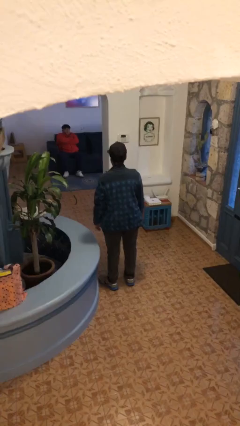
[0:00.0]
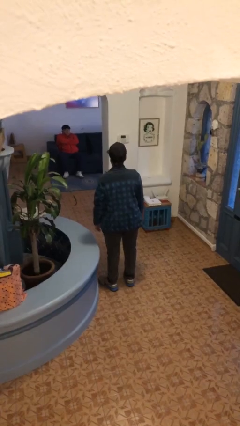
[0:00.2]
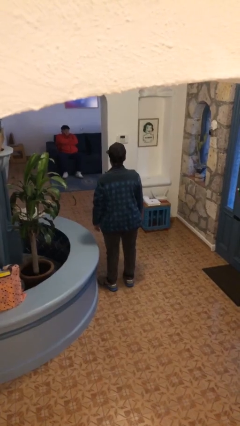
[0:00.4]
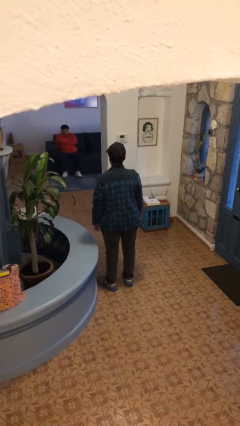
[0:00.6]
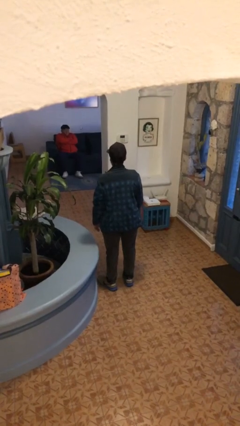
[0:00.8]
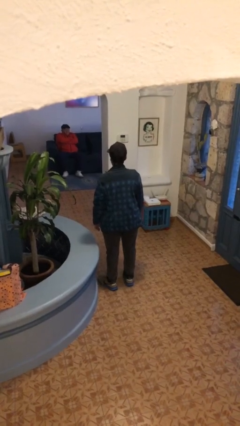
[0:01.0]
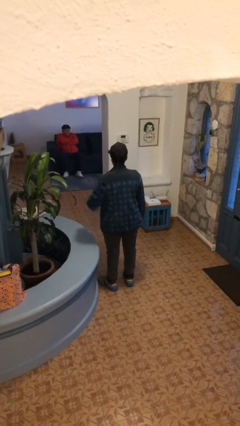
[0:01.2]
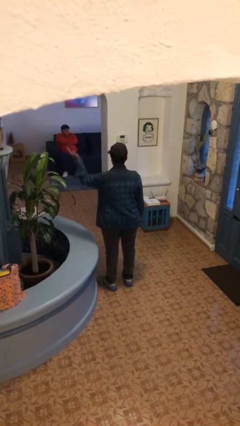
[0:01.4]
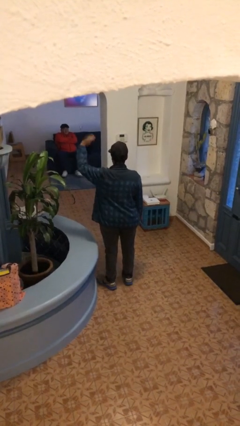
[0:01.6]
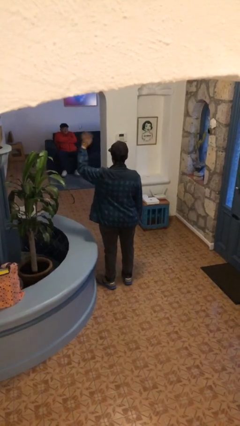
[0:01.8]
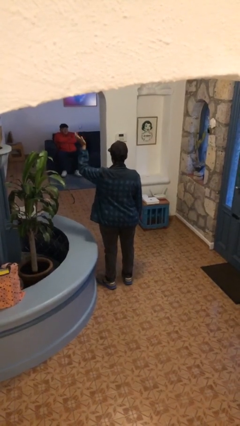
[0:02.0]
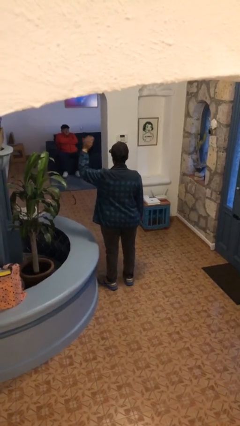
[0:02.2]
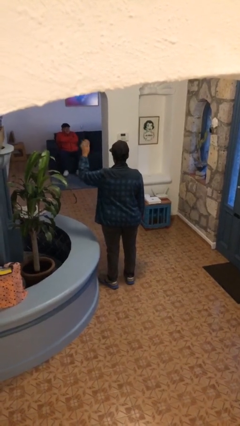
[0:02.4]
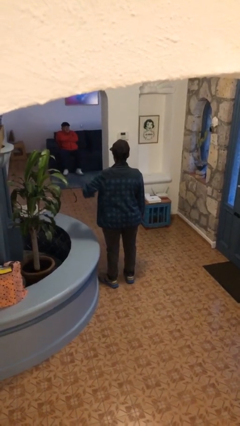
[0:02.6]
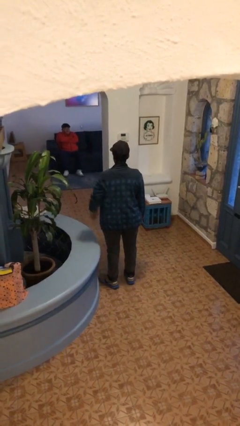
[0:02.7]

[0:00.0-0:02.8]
person waves at person

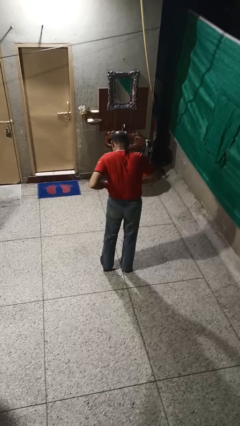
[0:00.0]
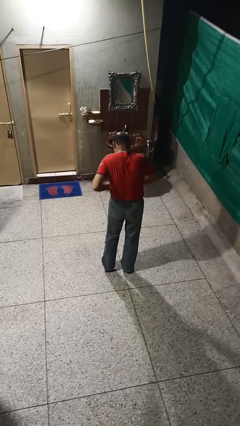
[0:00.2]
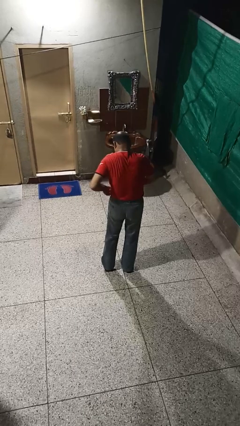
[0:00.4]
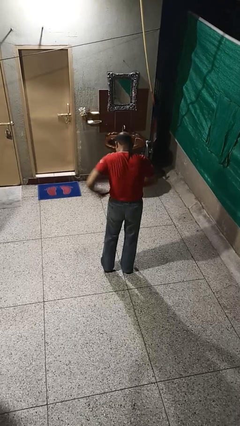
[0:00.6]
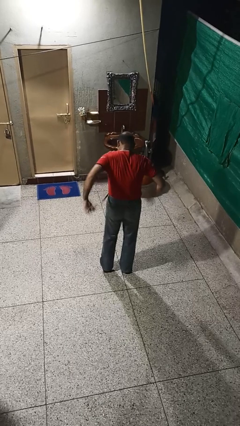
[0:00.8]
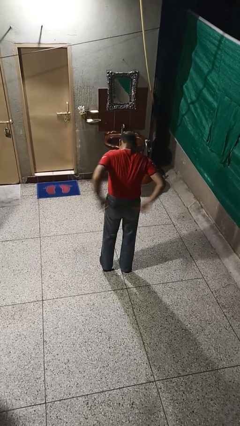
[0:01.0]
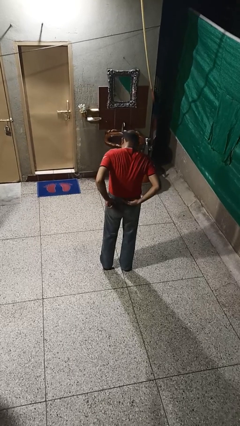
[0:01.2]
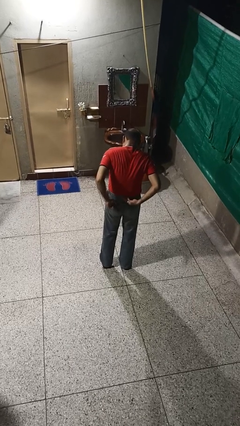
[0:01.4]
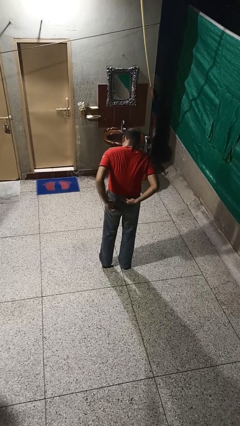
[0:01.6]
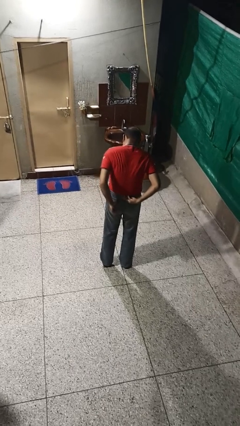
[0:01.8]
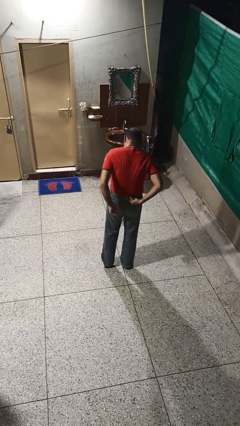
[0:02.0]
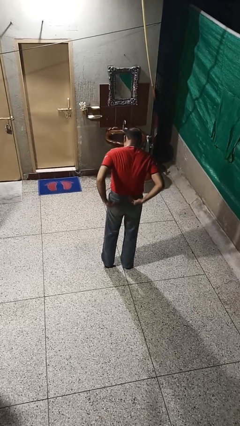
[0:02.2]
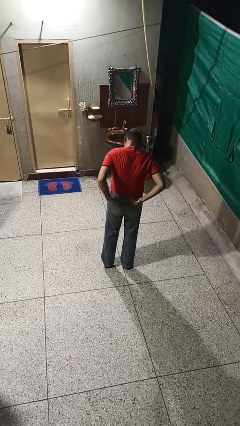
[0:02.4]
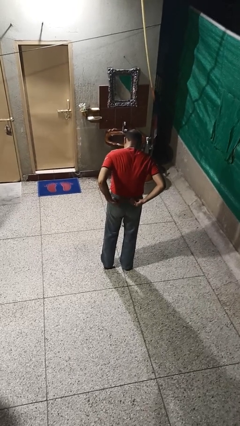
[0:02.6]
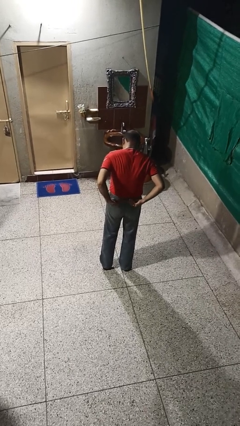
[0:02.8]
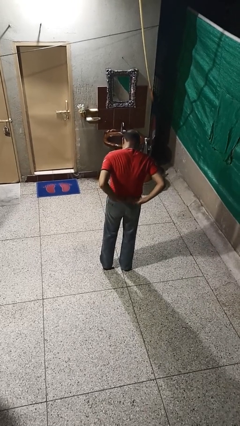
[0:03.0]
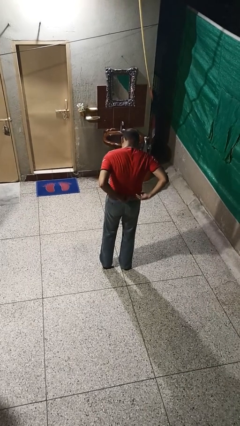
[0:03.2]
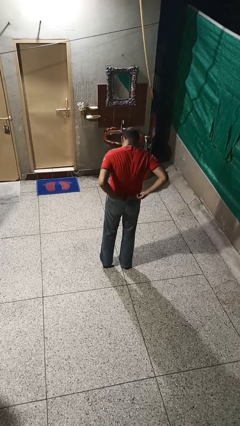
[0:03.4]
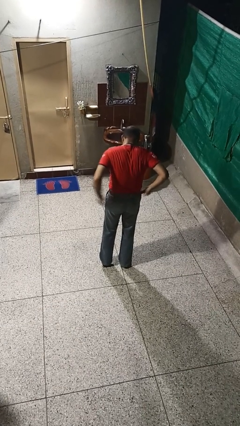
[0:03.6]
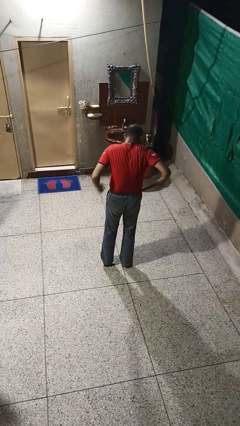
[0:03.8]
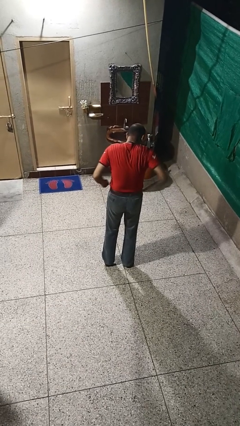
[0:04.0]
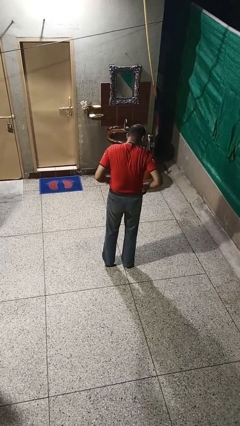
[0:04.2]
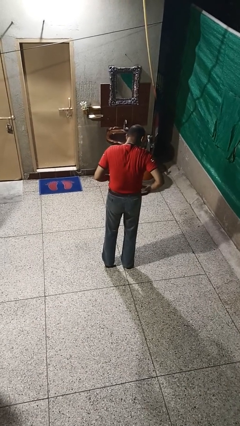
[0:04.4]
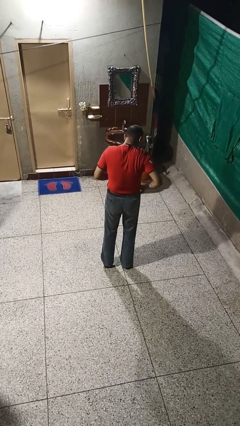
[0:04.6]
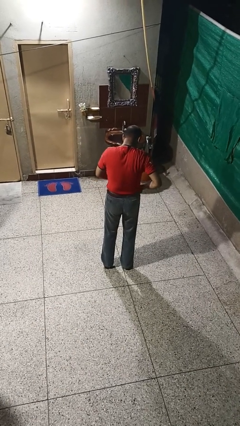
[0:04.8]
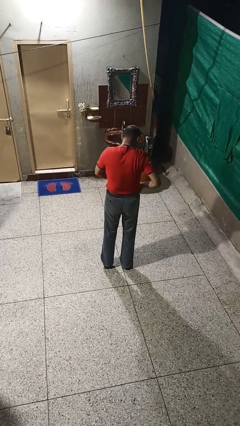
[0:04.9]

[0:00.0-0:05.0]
person puts on belt

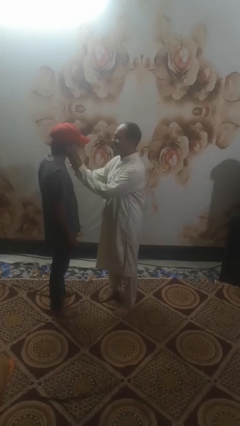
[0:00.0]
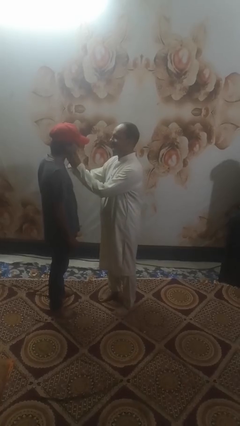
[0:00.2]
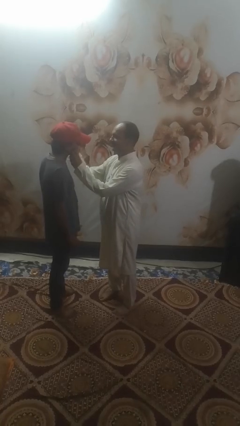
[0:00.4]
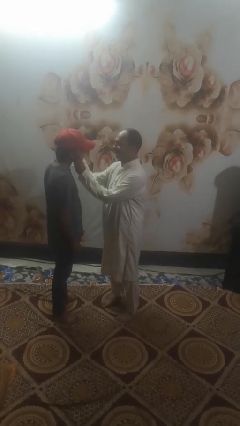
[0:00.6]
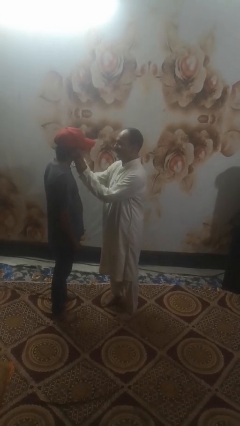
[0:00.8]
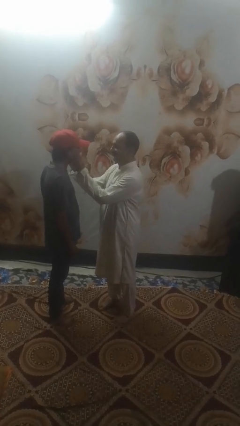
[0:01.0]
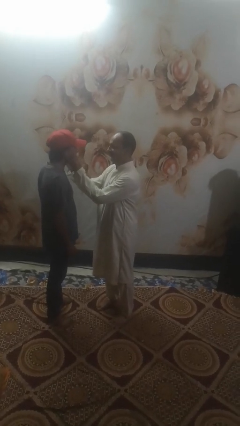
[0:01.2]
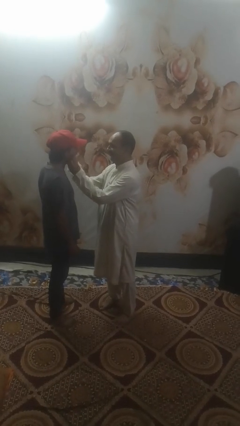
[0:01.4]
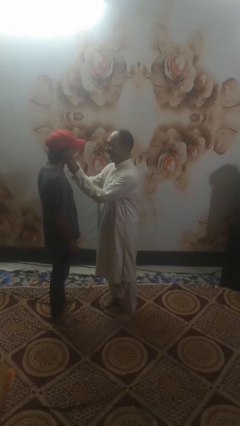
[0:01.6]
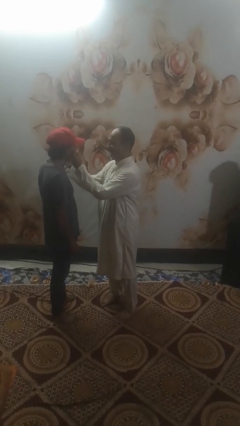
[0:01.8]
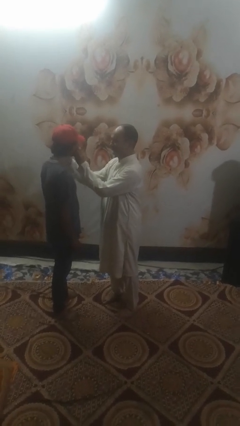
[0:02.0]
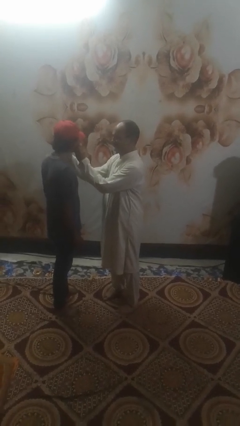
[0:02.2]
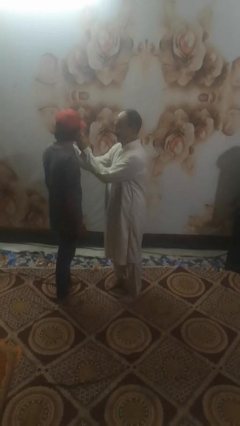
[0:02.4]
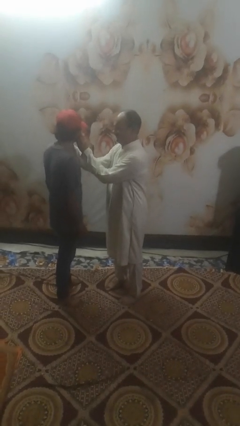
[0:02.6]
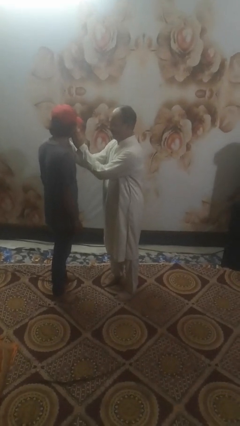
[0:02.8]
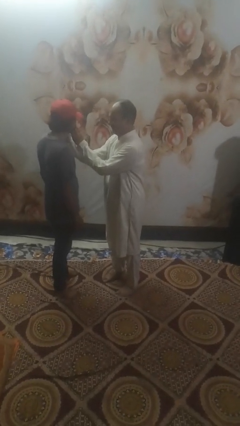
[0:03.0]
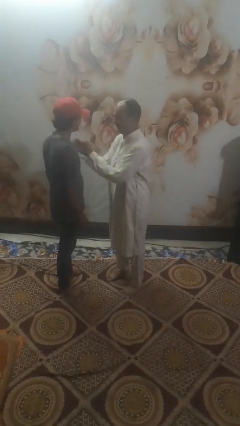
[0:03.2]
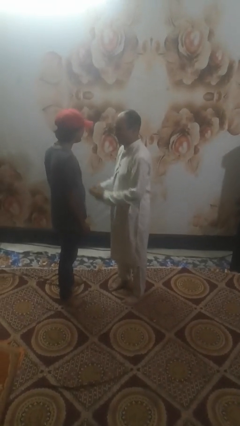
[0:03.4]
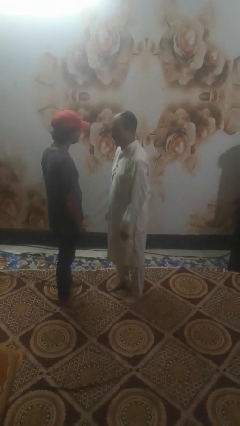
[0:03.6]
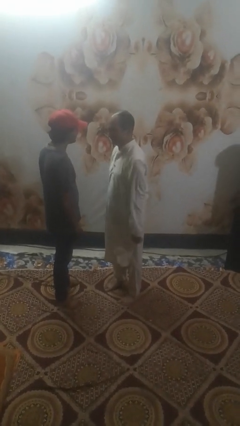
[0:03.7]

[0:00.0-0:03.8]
person touches face of person

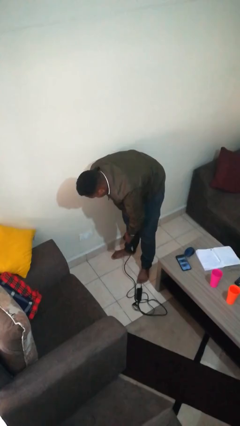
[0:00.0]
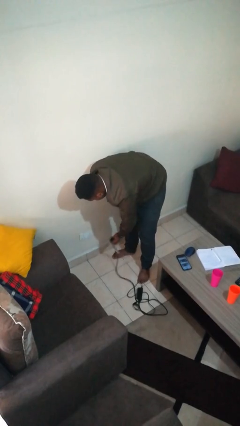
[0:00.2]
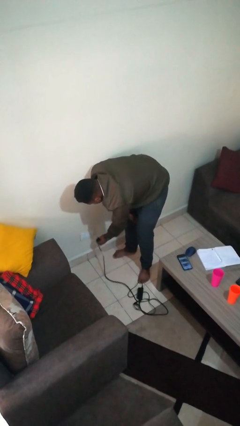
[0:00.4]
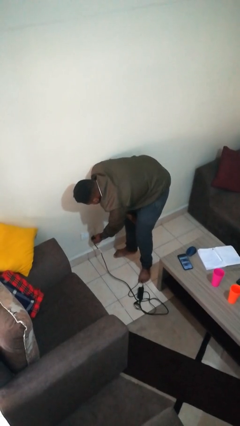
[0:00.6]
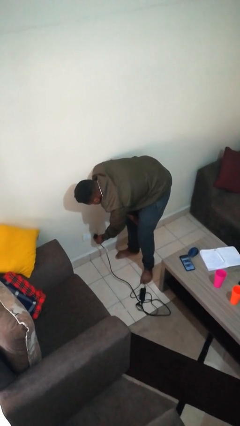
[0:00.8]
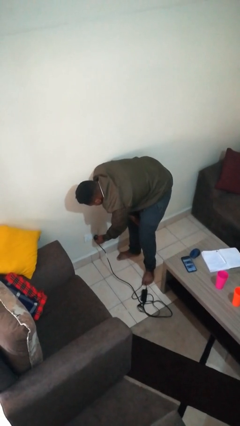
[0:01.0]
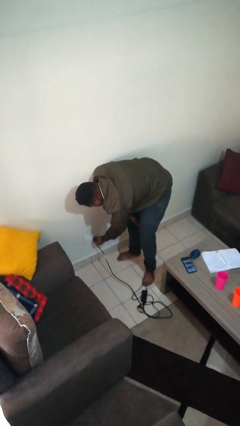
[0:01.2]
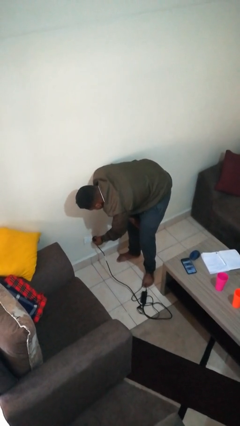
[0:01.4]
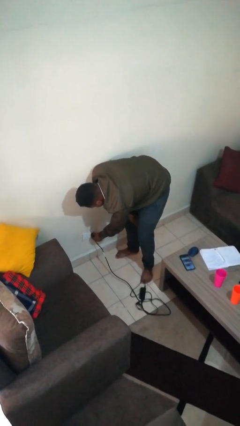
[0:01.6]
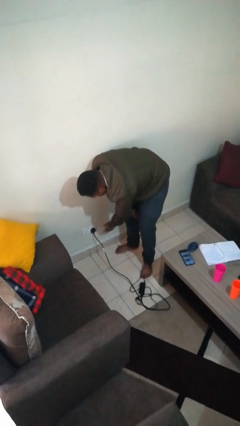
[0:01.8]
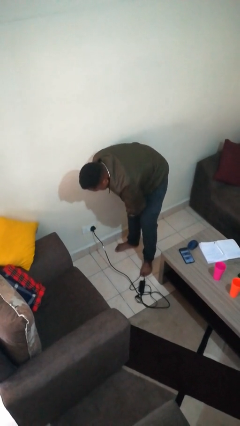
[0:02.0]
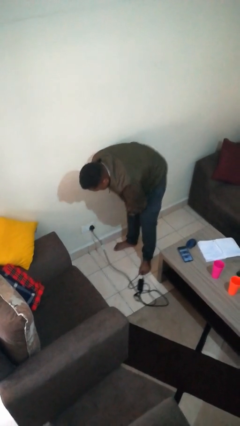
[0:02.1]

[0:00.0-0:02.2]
person plugs into electrical socket

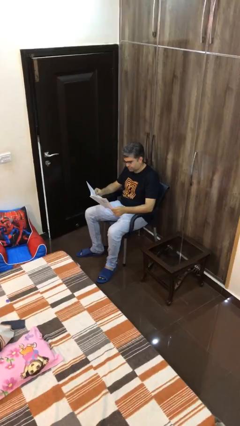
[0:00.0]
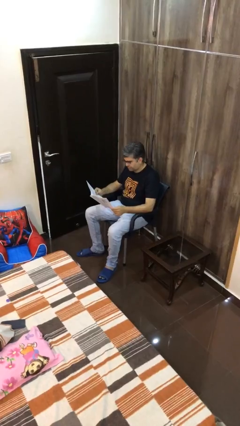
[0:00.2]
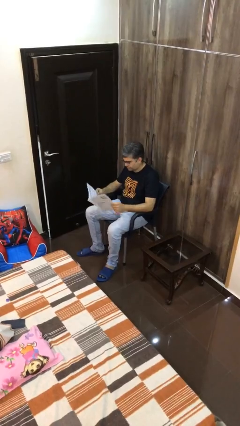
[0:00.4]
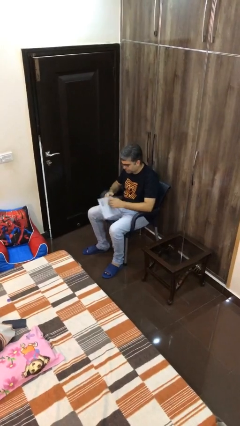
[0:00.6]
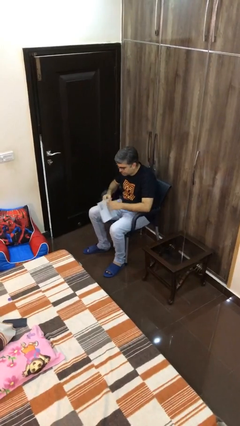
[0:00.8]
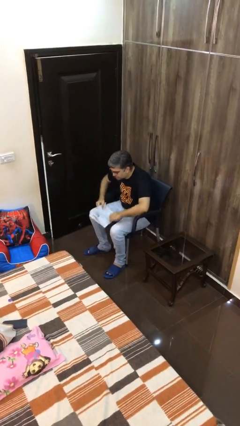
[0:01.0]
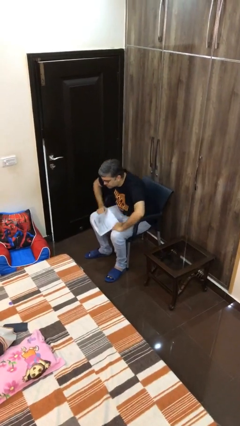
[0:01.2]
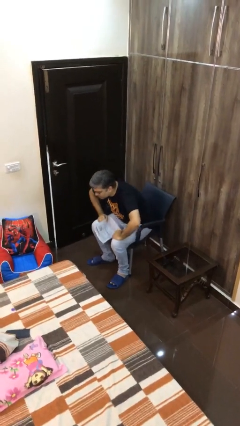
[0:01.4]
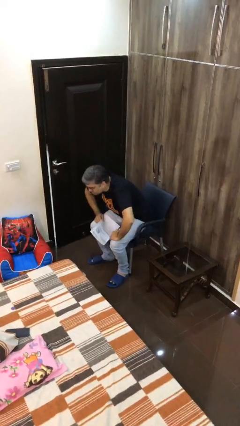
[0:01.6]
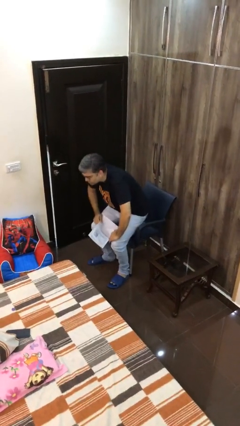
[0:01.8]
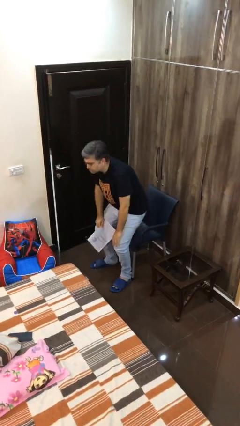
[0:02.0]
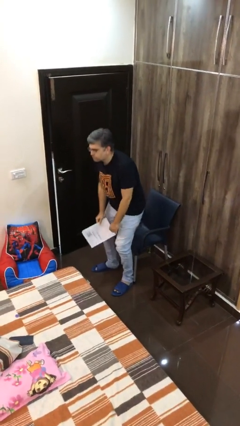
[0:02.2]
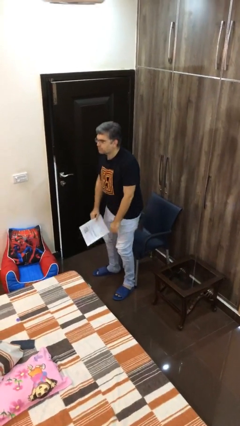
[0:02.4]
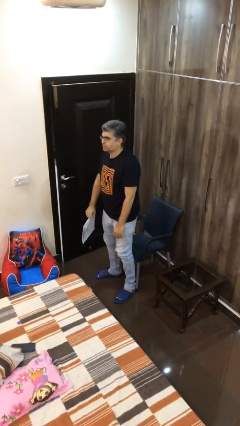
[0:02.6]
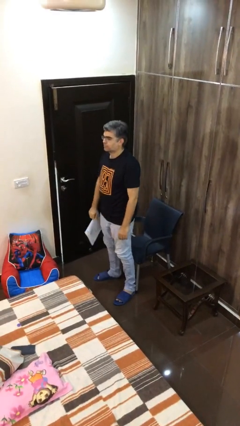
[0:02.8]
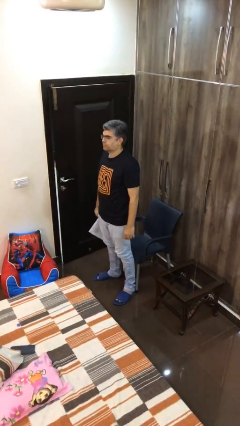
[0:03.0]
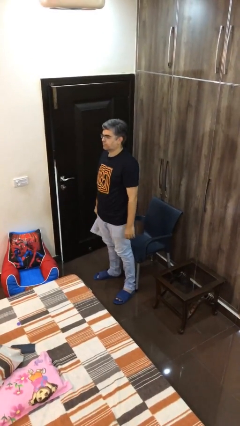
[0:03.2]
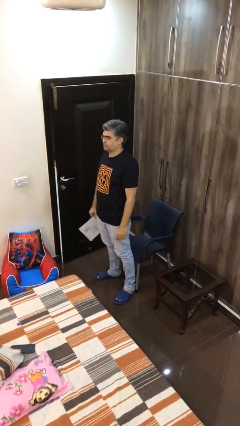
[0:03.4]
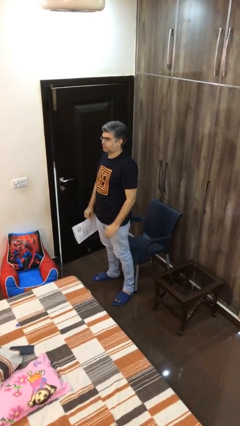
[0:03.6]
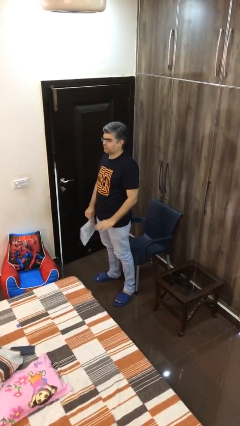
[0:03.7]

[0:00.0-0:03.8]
person stands up
